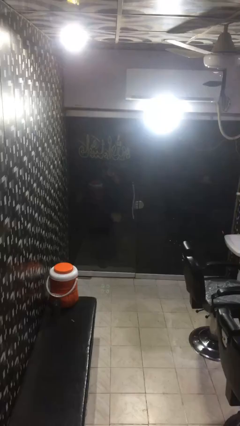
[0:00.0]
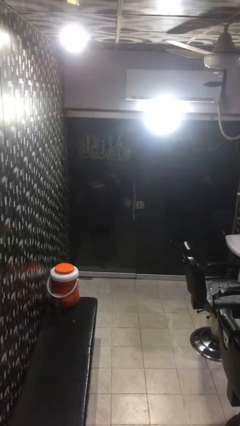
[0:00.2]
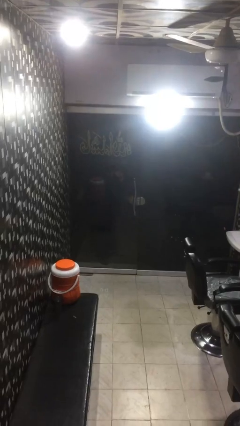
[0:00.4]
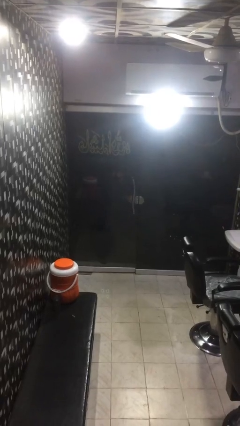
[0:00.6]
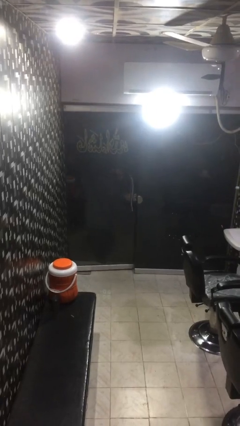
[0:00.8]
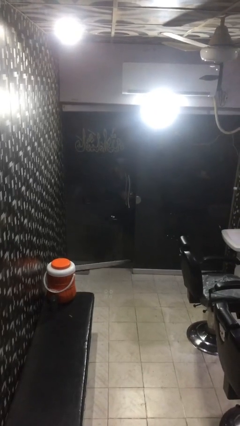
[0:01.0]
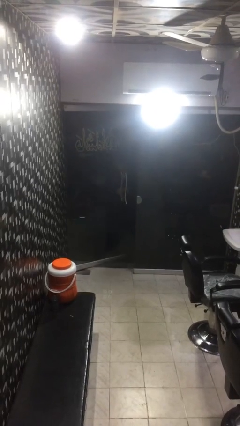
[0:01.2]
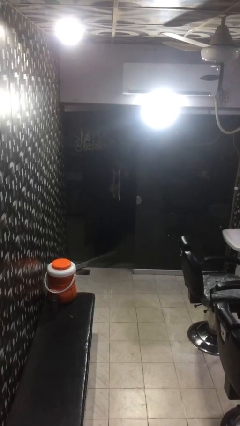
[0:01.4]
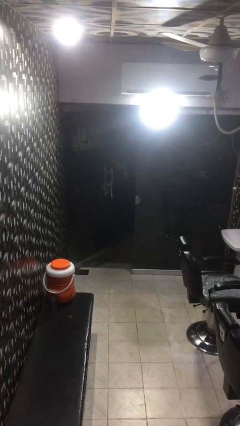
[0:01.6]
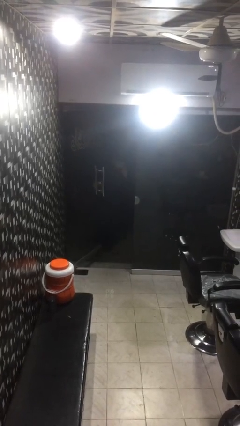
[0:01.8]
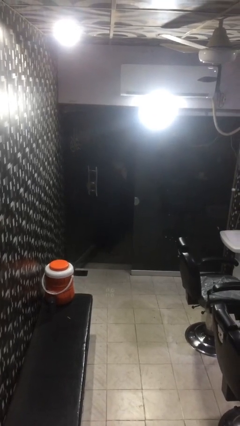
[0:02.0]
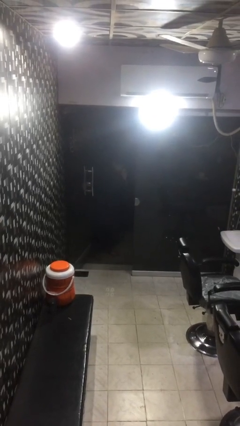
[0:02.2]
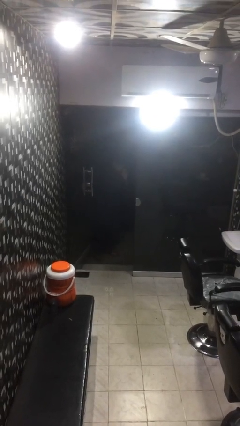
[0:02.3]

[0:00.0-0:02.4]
person opens facility door

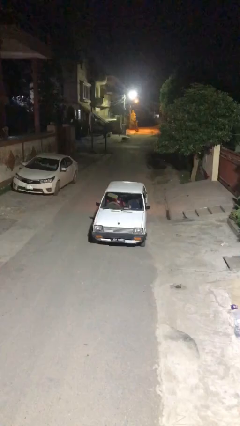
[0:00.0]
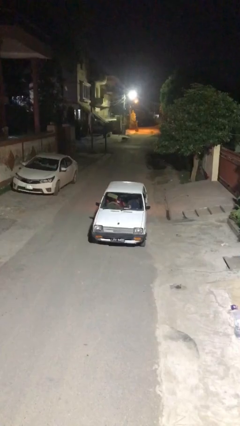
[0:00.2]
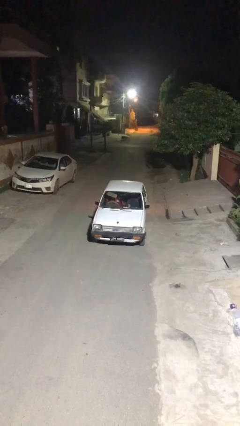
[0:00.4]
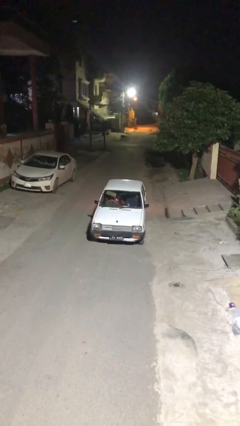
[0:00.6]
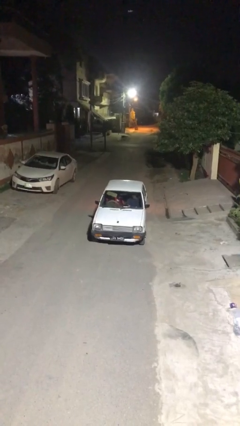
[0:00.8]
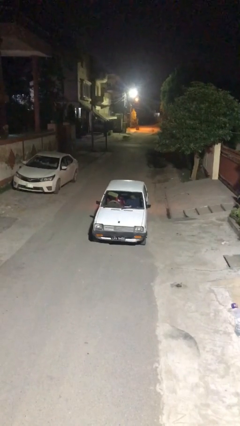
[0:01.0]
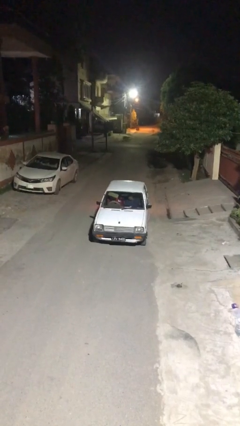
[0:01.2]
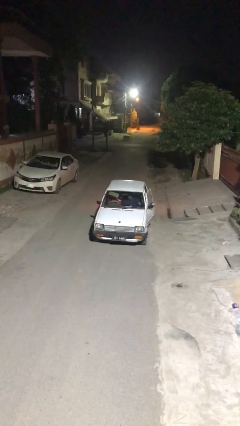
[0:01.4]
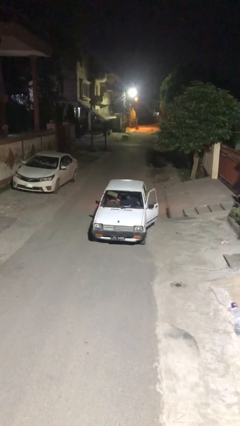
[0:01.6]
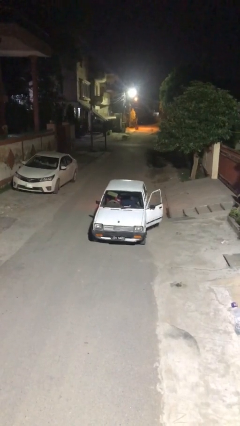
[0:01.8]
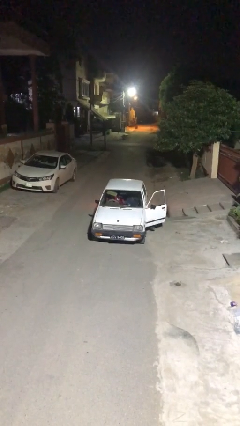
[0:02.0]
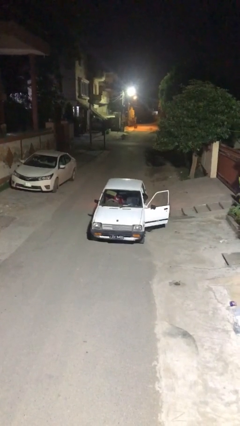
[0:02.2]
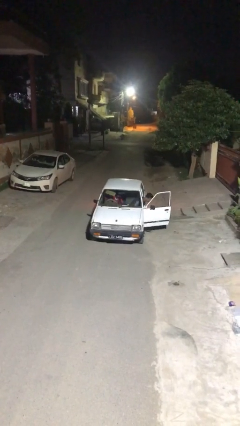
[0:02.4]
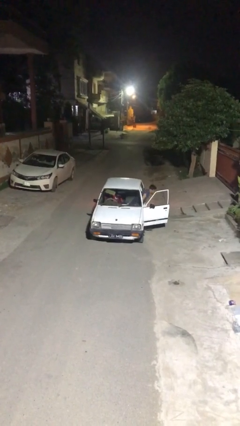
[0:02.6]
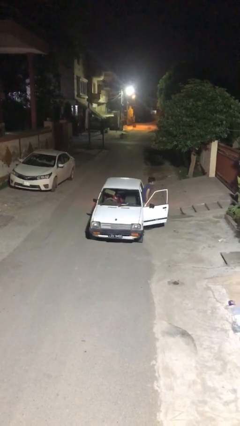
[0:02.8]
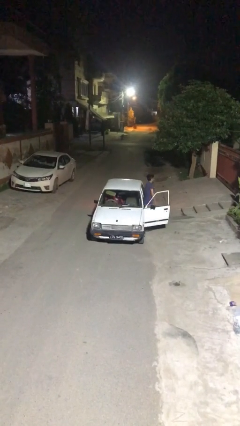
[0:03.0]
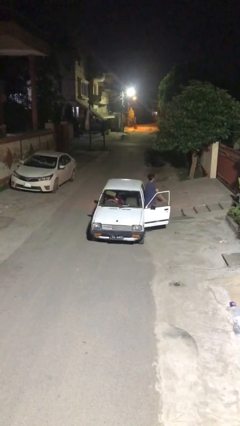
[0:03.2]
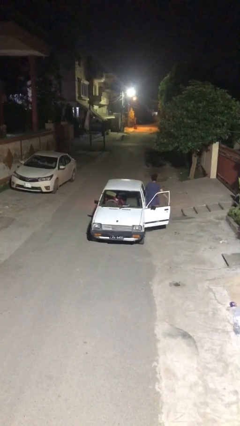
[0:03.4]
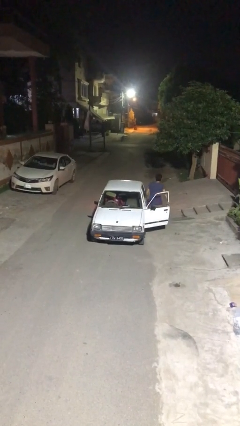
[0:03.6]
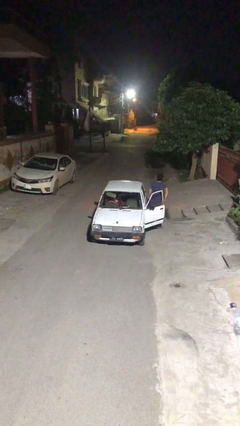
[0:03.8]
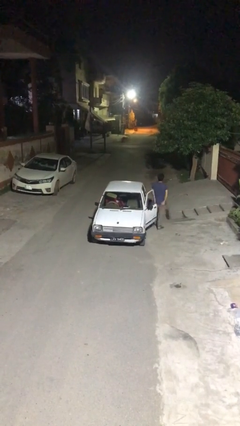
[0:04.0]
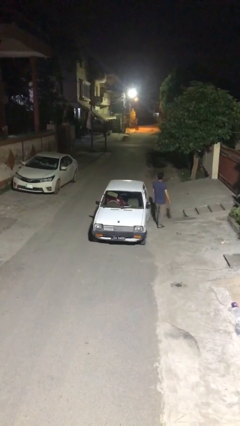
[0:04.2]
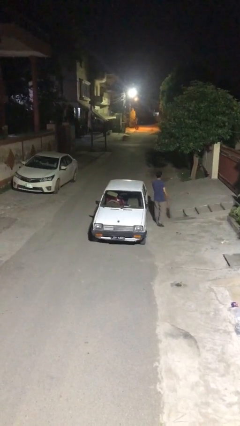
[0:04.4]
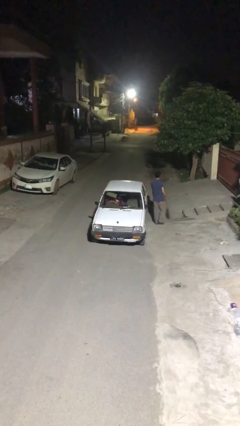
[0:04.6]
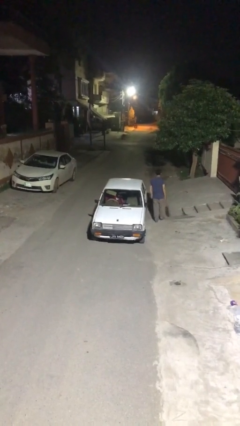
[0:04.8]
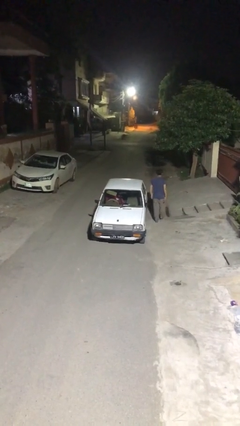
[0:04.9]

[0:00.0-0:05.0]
car drops off person

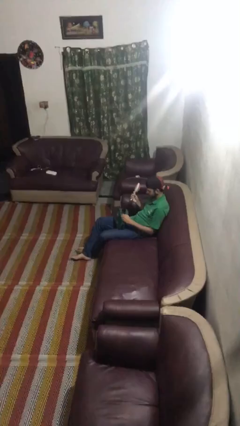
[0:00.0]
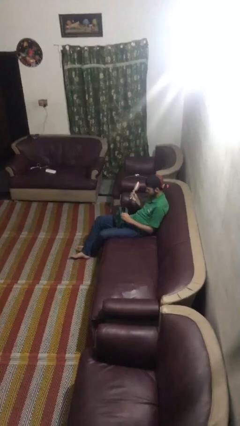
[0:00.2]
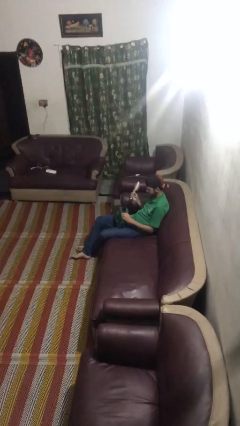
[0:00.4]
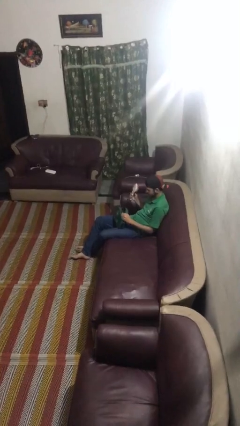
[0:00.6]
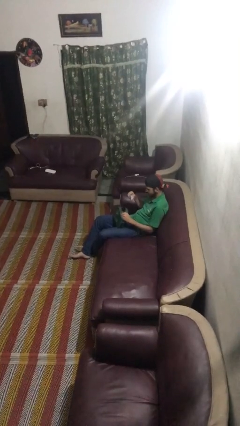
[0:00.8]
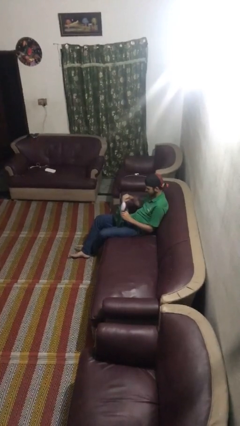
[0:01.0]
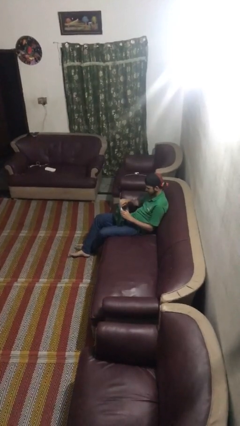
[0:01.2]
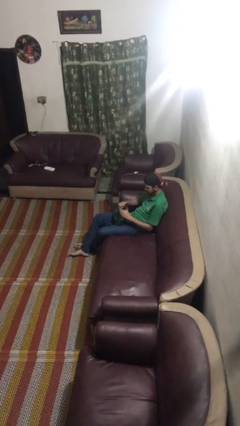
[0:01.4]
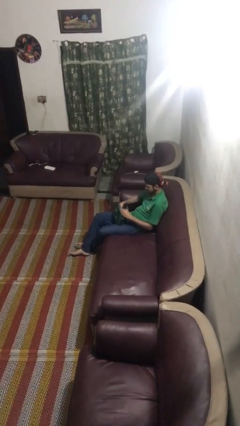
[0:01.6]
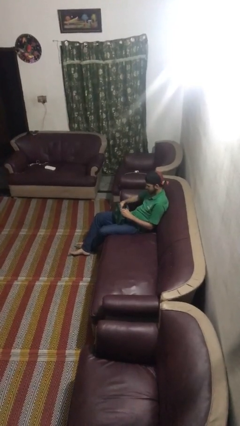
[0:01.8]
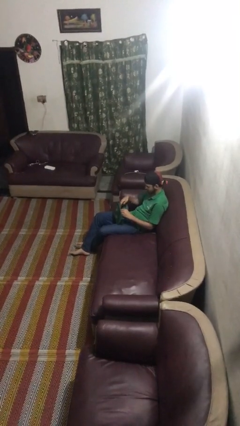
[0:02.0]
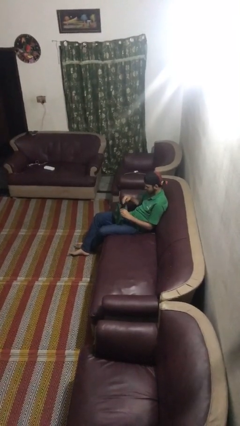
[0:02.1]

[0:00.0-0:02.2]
person puts object into purse

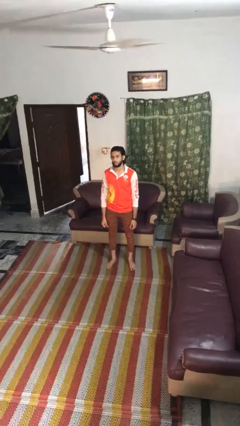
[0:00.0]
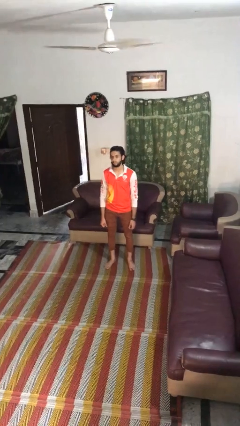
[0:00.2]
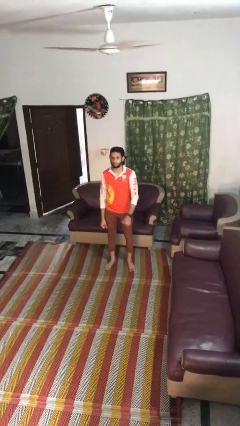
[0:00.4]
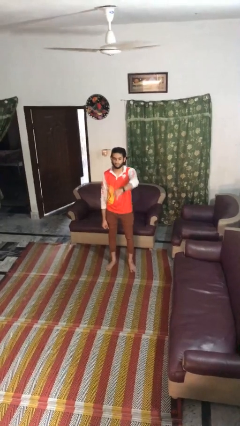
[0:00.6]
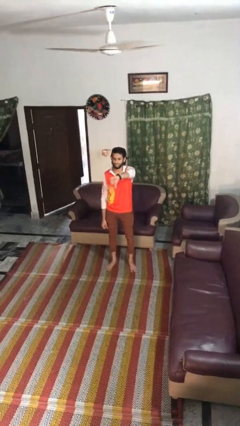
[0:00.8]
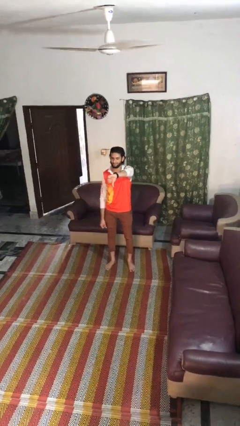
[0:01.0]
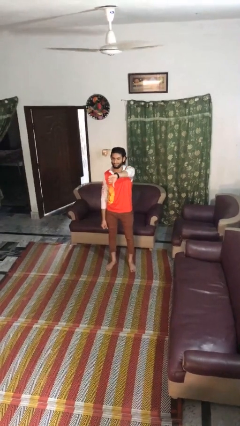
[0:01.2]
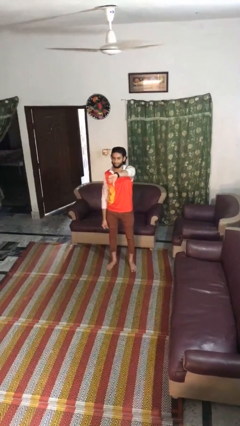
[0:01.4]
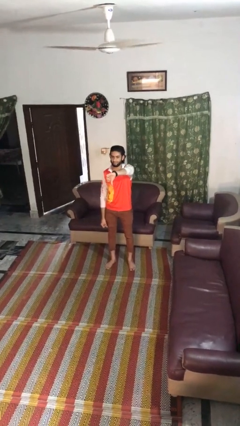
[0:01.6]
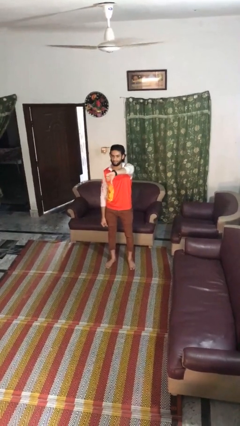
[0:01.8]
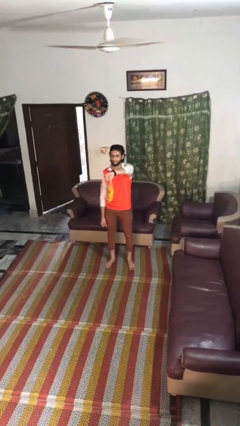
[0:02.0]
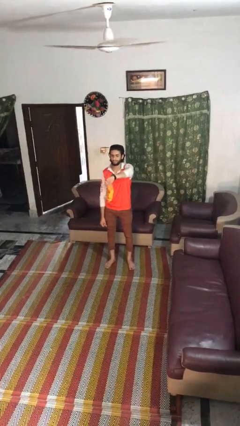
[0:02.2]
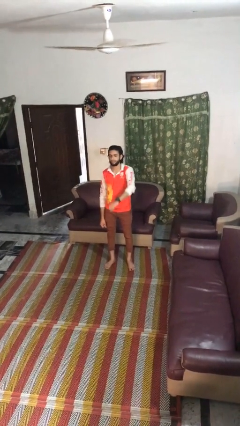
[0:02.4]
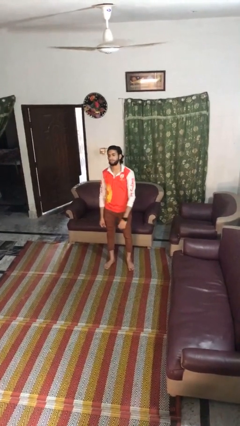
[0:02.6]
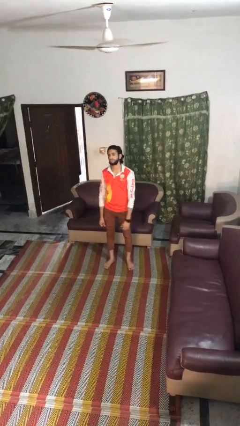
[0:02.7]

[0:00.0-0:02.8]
person gestures thumbs down

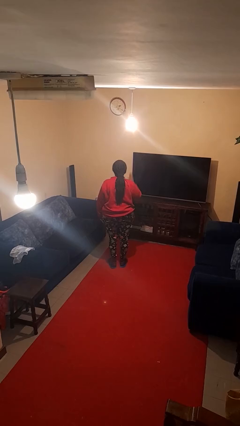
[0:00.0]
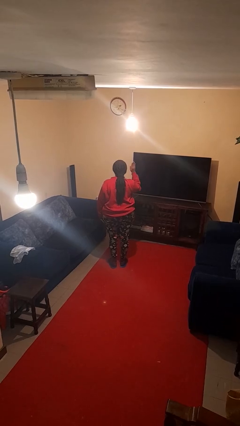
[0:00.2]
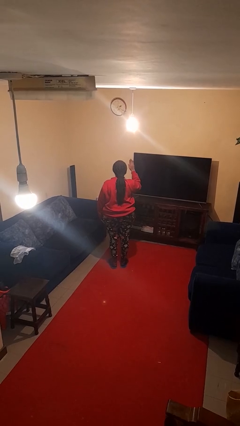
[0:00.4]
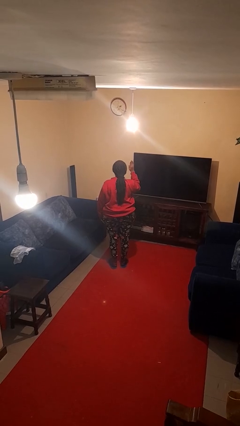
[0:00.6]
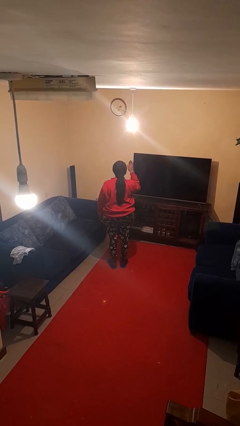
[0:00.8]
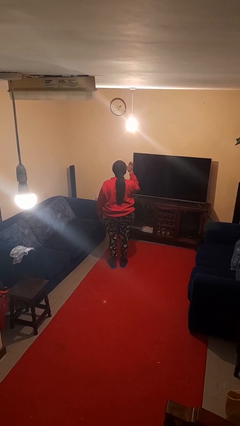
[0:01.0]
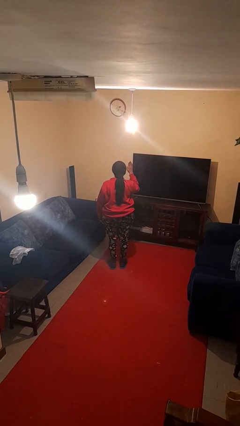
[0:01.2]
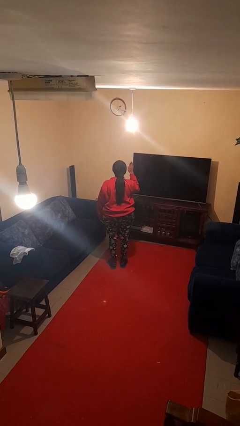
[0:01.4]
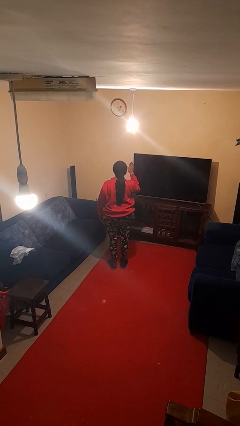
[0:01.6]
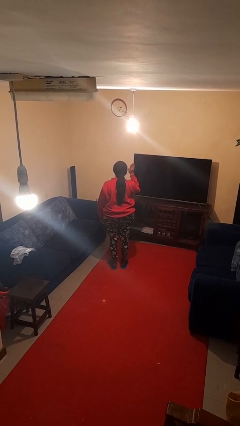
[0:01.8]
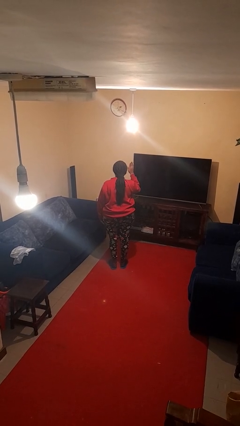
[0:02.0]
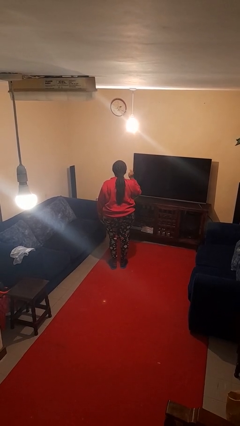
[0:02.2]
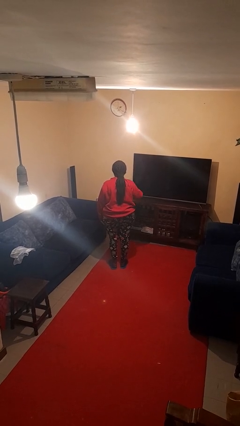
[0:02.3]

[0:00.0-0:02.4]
person gestures stop

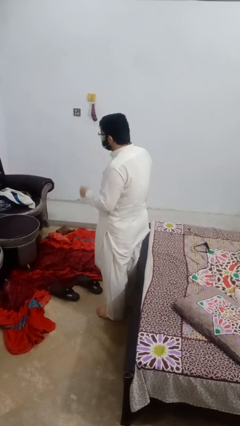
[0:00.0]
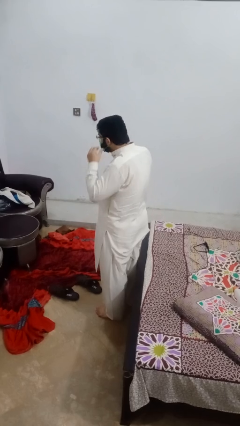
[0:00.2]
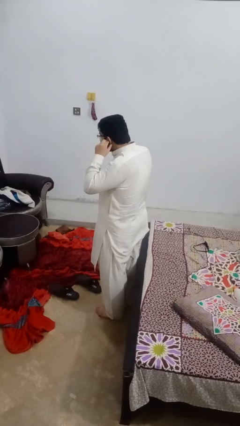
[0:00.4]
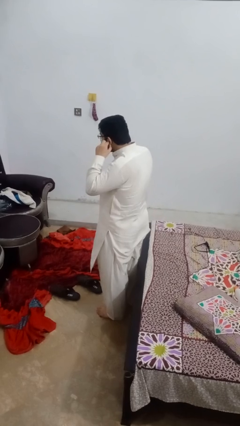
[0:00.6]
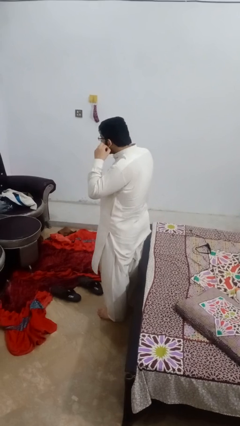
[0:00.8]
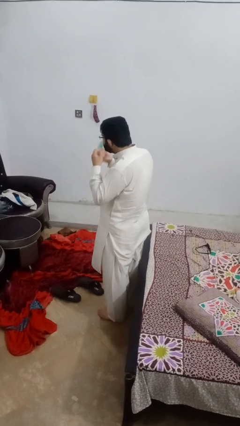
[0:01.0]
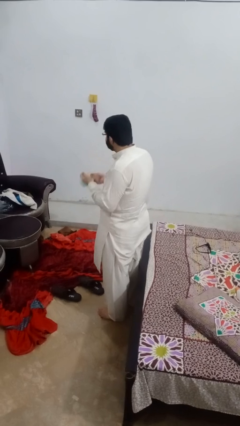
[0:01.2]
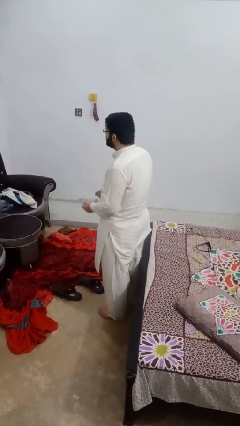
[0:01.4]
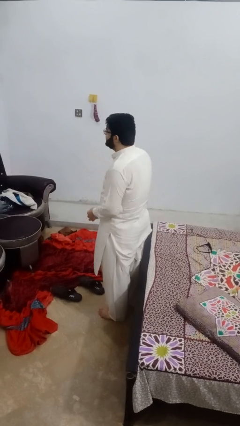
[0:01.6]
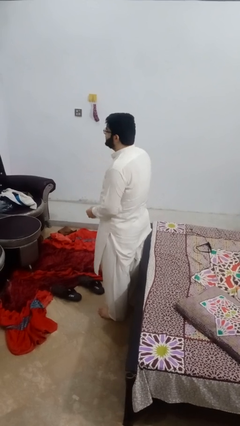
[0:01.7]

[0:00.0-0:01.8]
person takes off facemask

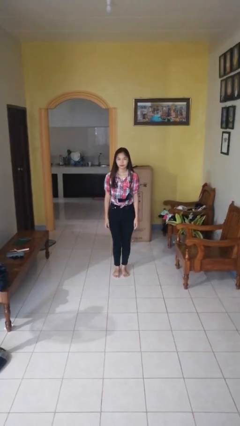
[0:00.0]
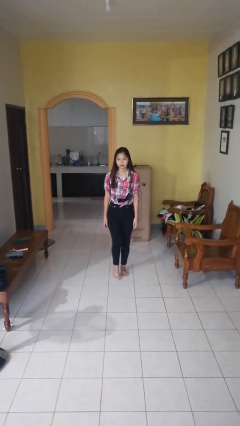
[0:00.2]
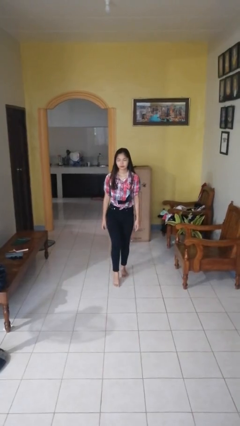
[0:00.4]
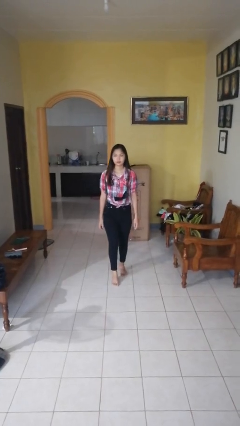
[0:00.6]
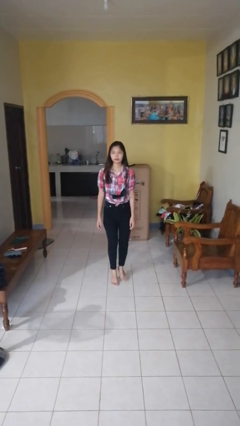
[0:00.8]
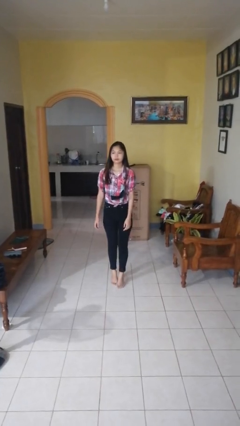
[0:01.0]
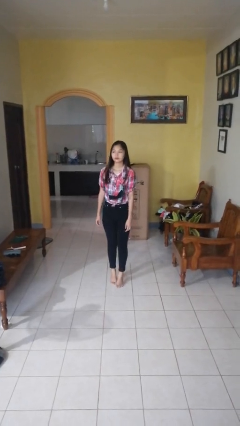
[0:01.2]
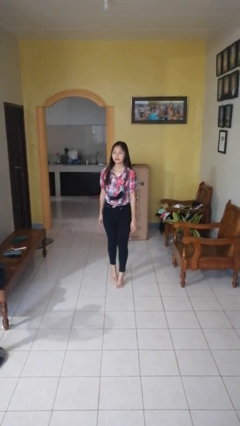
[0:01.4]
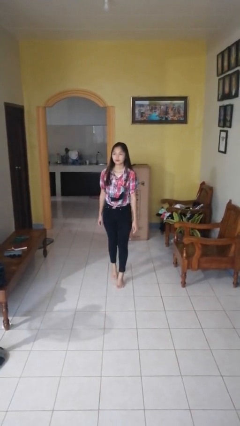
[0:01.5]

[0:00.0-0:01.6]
person walks tiptoe
